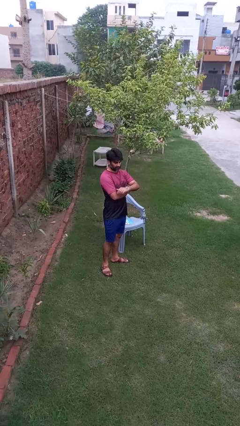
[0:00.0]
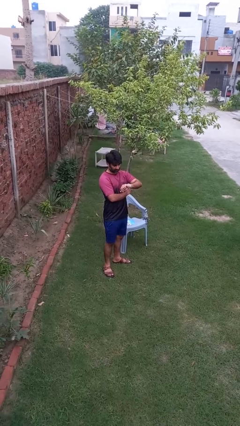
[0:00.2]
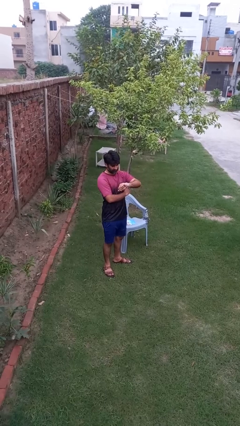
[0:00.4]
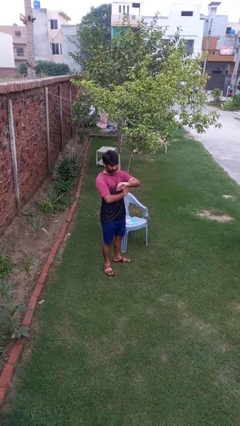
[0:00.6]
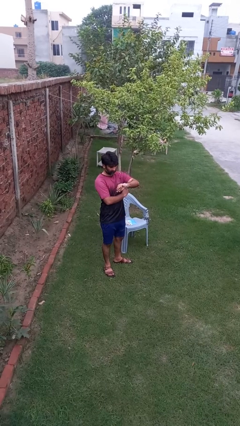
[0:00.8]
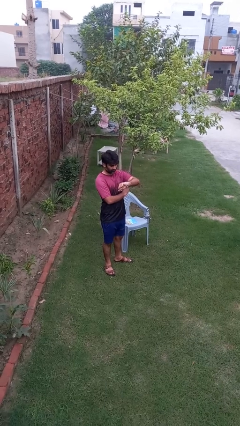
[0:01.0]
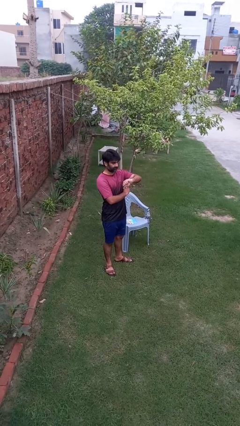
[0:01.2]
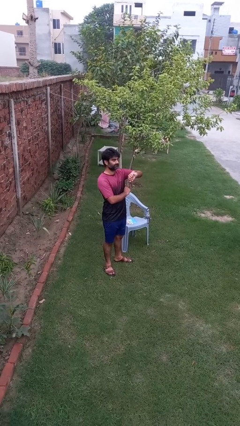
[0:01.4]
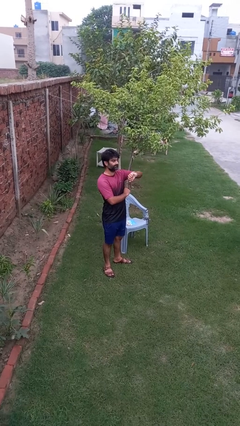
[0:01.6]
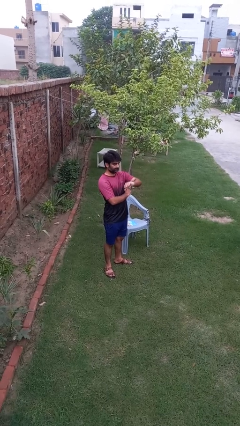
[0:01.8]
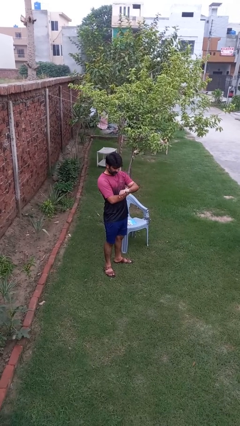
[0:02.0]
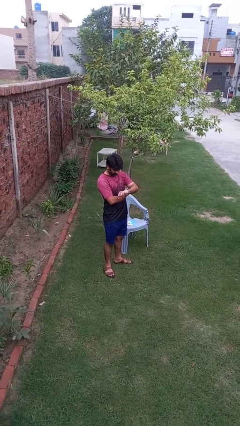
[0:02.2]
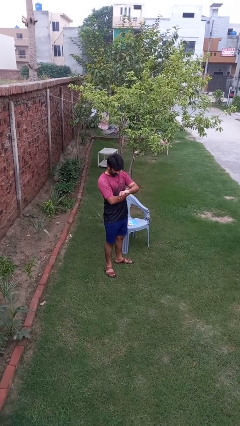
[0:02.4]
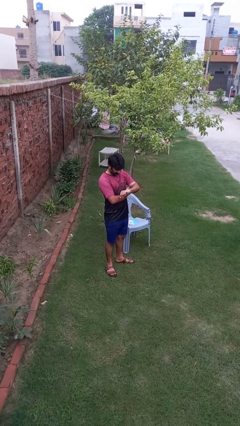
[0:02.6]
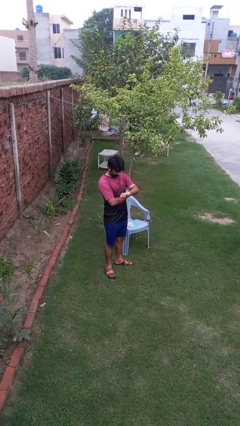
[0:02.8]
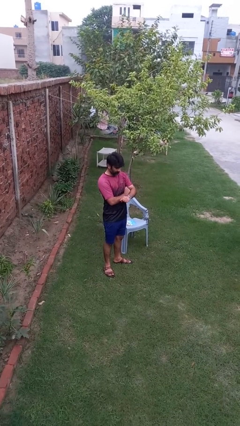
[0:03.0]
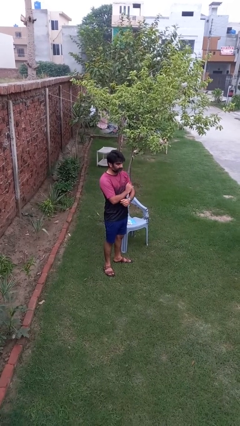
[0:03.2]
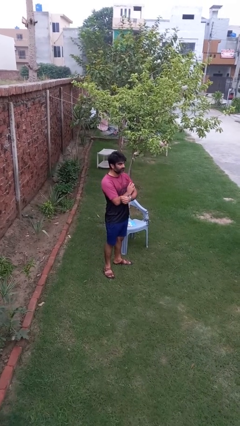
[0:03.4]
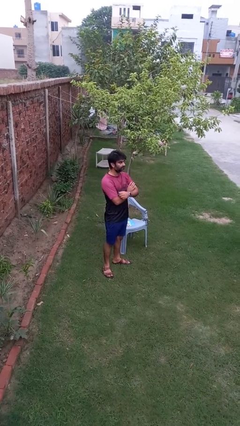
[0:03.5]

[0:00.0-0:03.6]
person looks at wristwatch

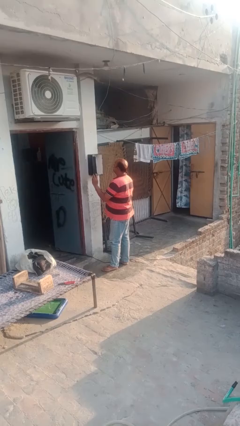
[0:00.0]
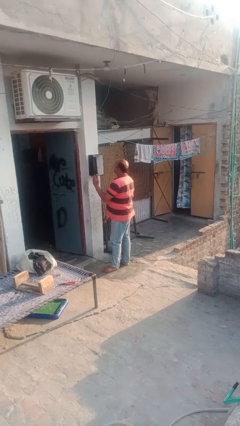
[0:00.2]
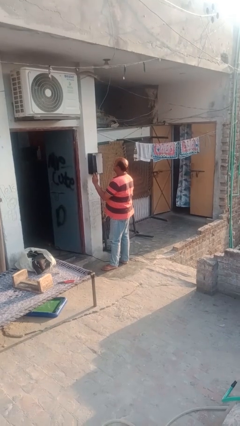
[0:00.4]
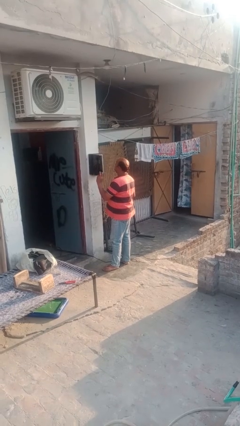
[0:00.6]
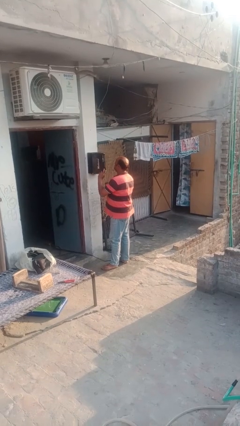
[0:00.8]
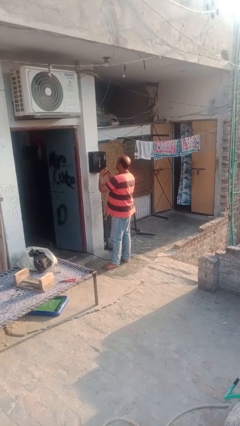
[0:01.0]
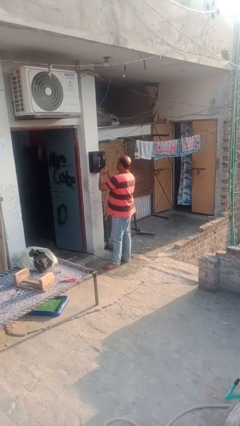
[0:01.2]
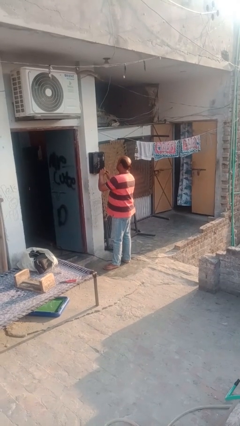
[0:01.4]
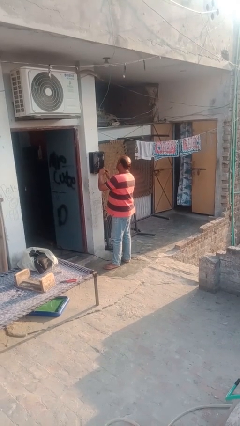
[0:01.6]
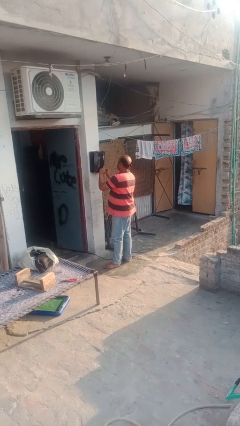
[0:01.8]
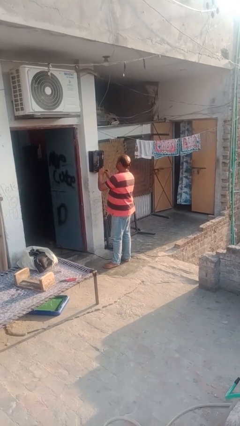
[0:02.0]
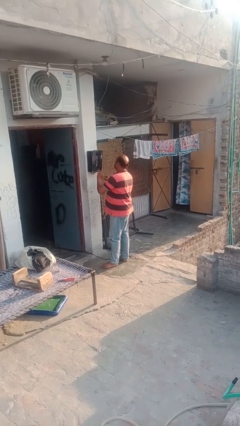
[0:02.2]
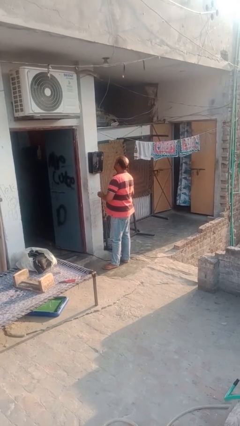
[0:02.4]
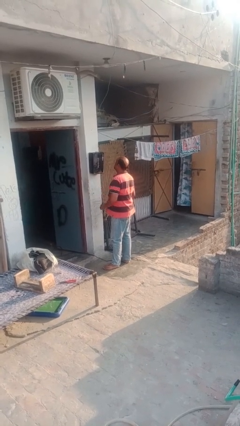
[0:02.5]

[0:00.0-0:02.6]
person closes mailbox

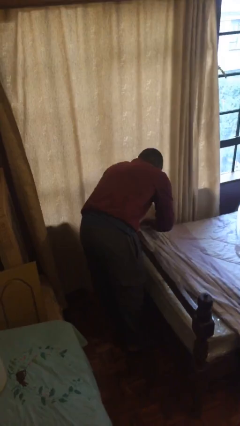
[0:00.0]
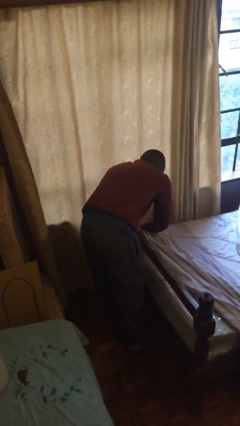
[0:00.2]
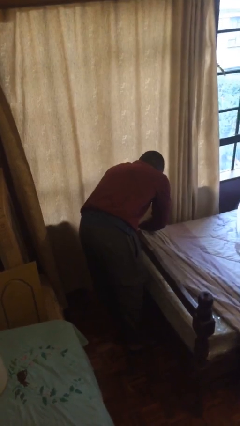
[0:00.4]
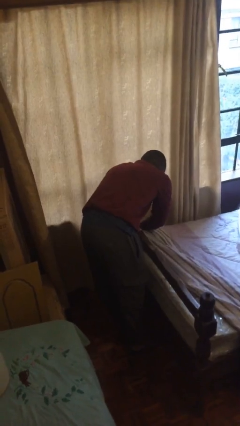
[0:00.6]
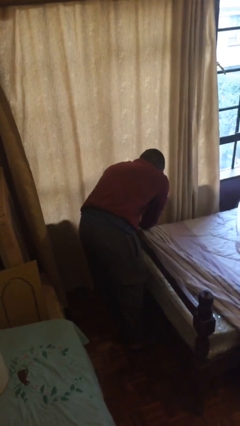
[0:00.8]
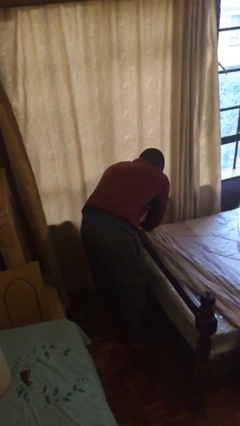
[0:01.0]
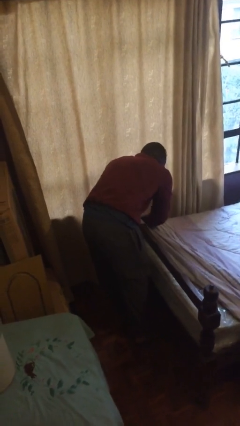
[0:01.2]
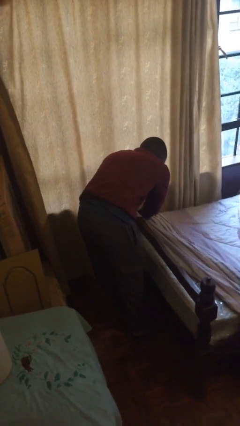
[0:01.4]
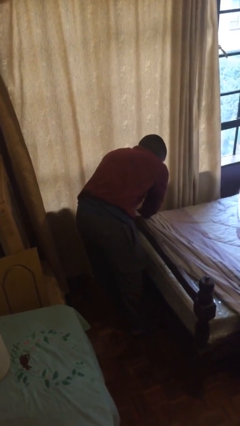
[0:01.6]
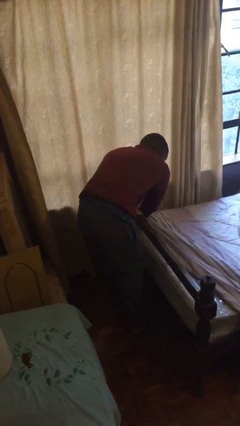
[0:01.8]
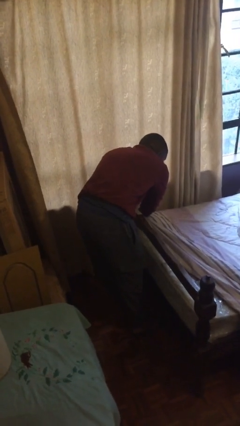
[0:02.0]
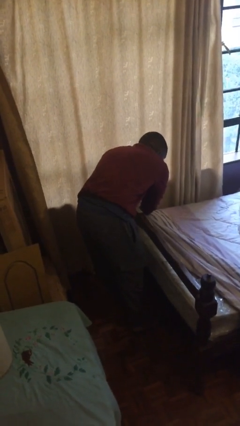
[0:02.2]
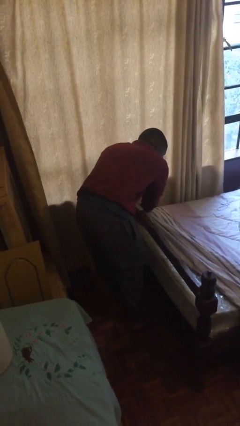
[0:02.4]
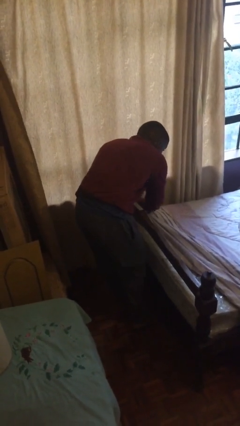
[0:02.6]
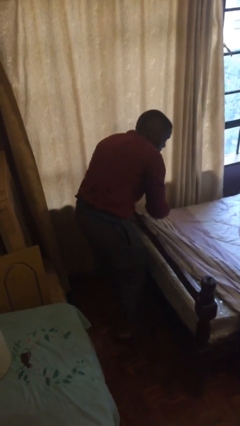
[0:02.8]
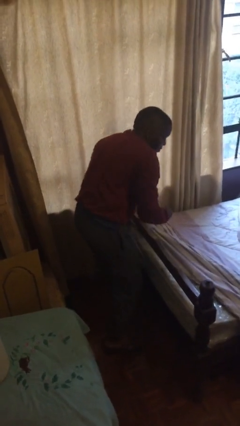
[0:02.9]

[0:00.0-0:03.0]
person makes bed

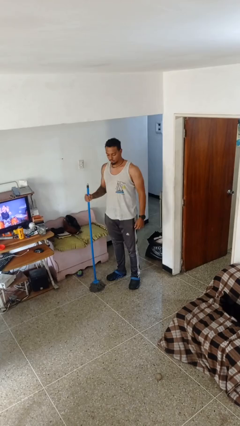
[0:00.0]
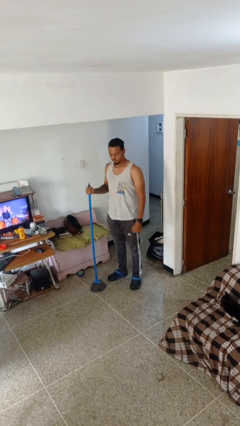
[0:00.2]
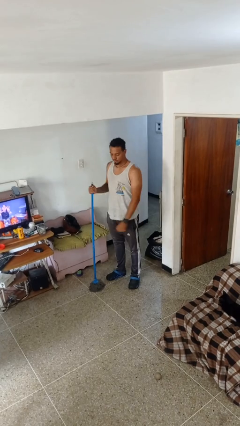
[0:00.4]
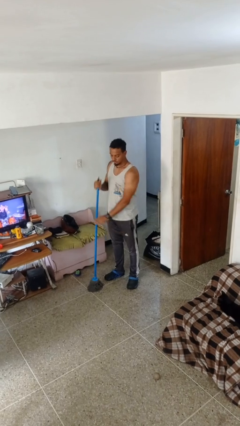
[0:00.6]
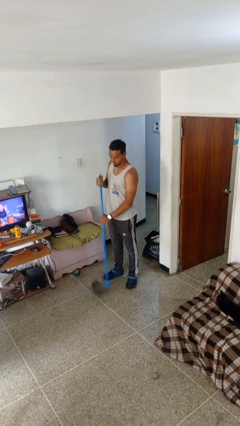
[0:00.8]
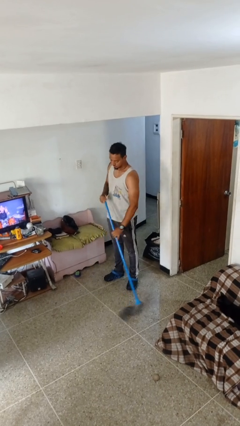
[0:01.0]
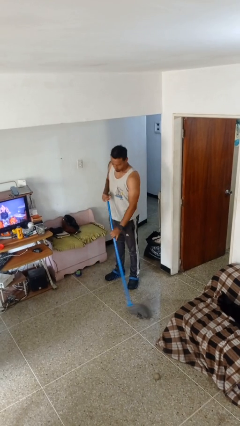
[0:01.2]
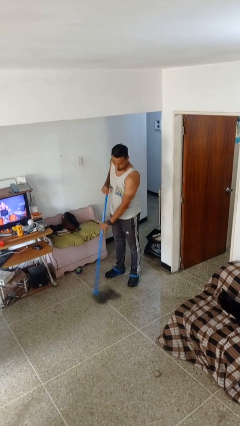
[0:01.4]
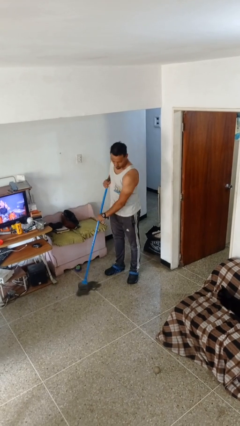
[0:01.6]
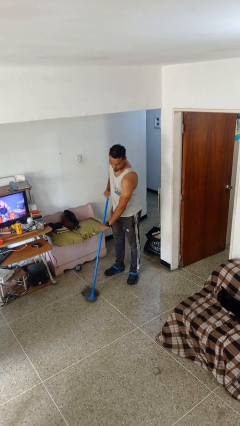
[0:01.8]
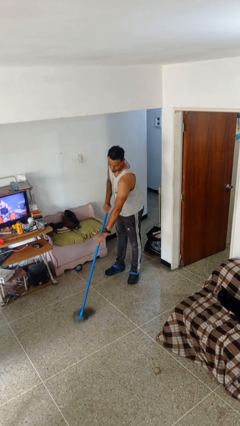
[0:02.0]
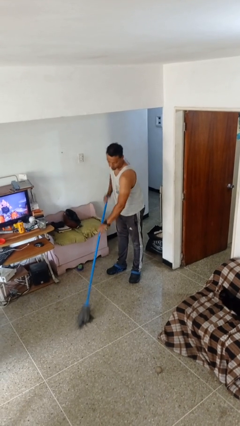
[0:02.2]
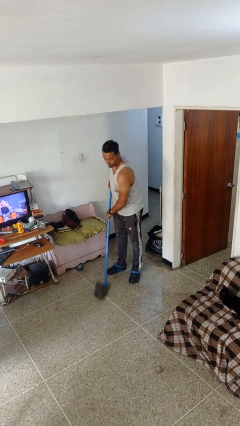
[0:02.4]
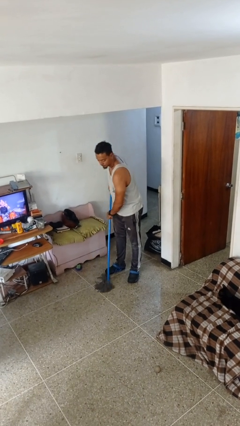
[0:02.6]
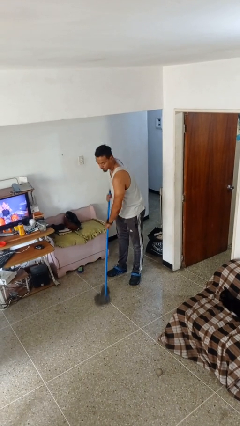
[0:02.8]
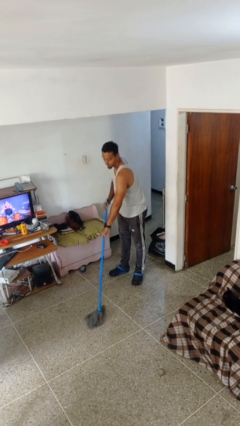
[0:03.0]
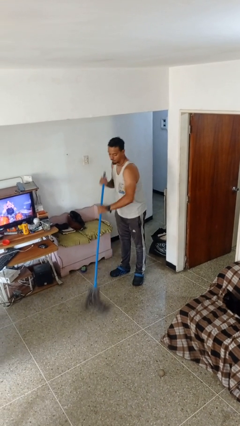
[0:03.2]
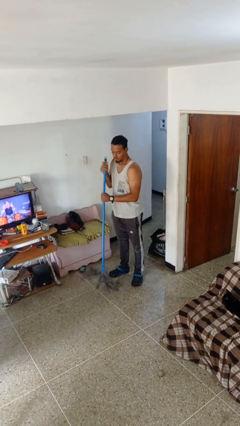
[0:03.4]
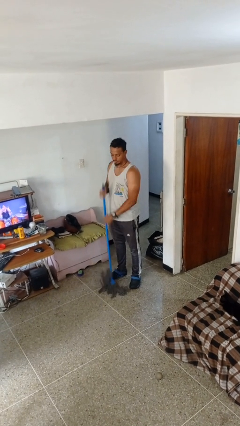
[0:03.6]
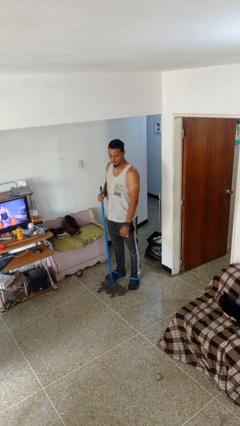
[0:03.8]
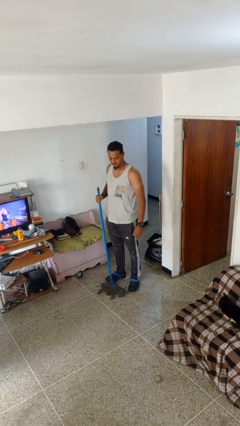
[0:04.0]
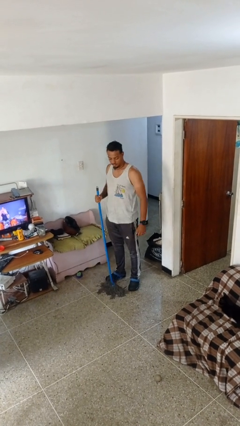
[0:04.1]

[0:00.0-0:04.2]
person mops

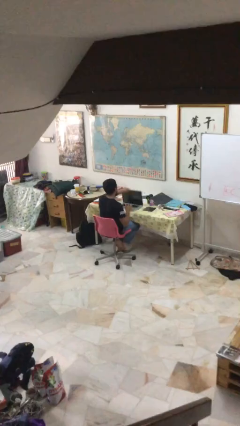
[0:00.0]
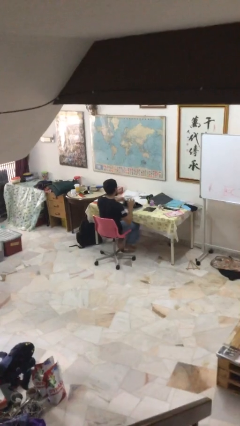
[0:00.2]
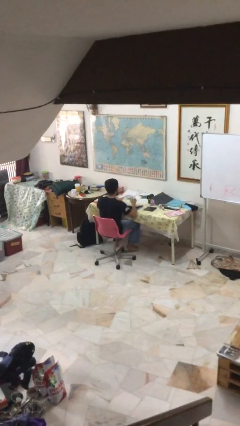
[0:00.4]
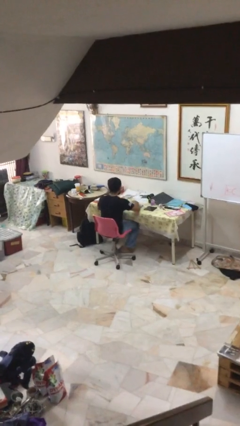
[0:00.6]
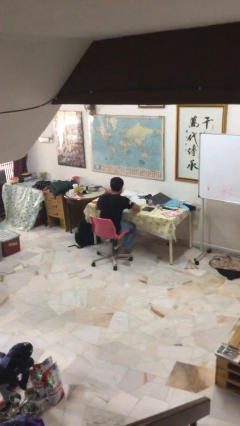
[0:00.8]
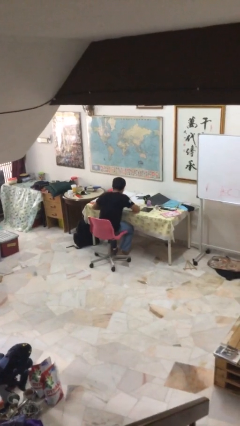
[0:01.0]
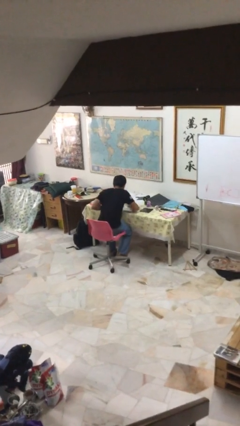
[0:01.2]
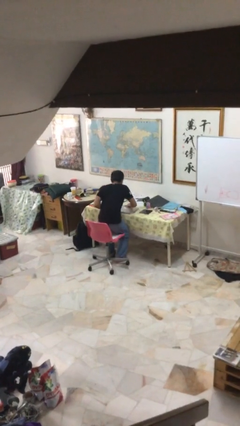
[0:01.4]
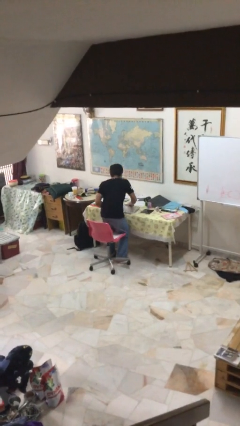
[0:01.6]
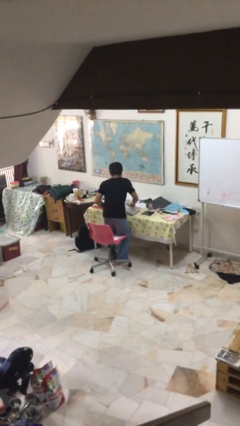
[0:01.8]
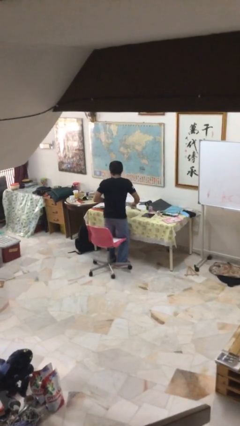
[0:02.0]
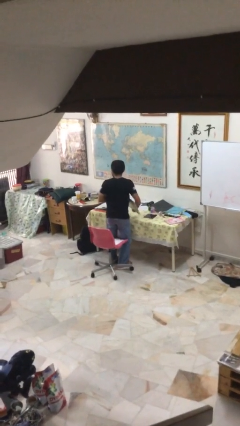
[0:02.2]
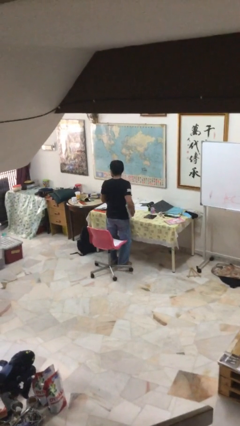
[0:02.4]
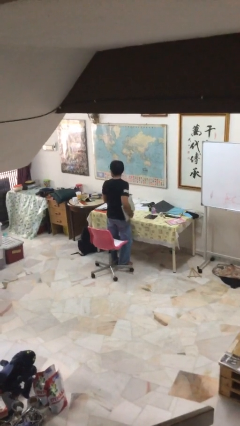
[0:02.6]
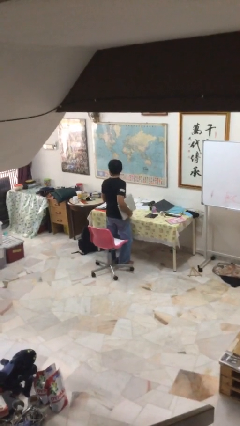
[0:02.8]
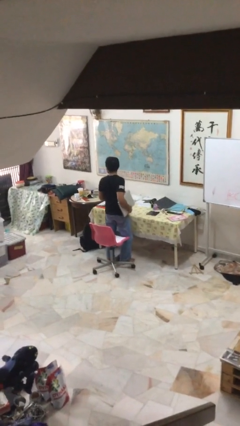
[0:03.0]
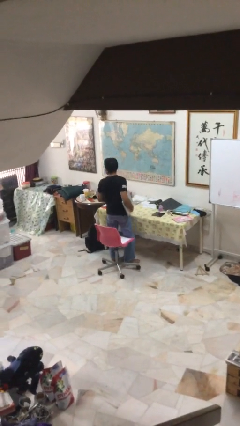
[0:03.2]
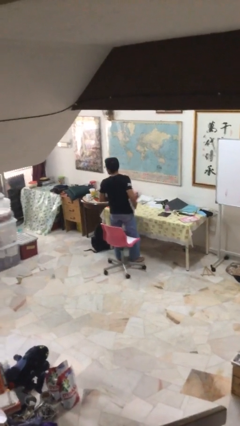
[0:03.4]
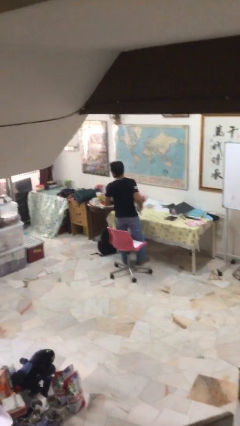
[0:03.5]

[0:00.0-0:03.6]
person stands up

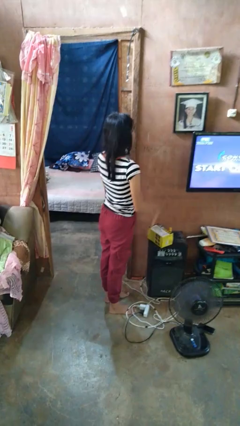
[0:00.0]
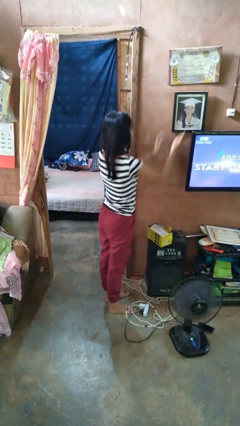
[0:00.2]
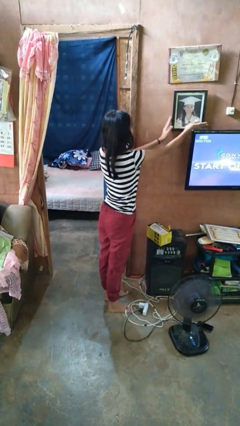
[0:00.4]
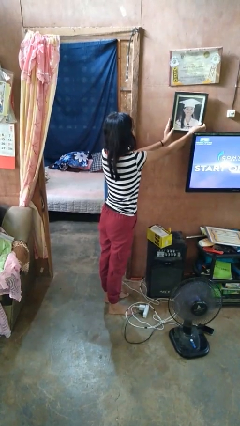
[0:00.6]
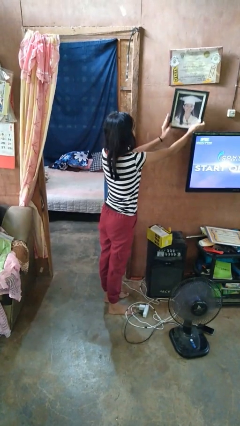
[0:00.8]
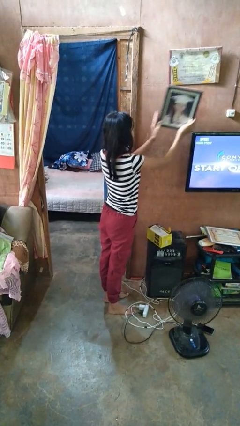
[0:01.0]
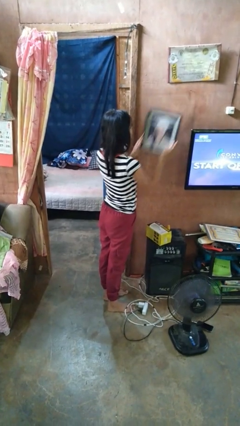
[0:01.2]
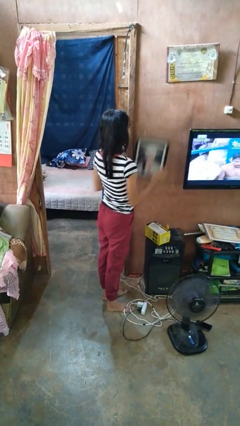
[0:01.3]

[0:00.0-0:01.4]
person takes down picture frame
